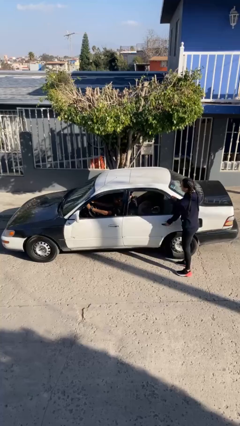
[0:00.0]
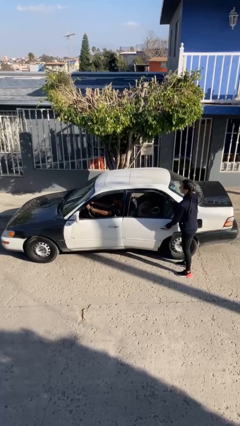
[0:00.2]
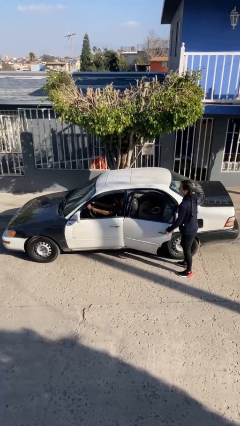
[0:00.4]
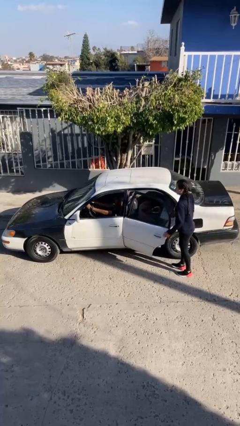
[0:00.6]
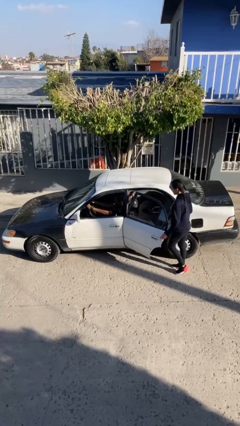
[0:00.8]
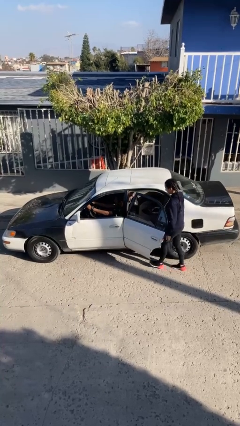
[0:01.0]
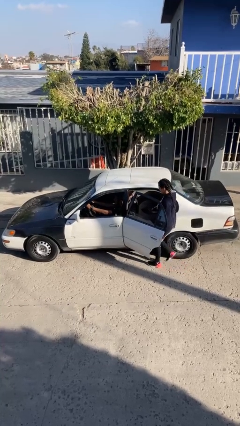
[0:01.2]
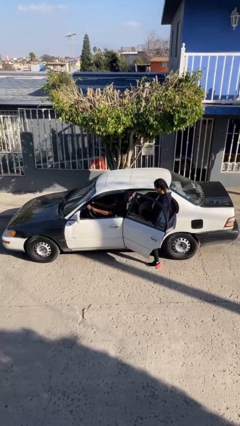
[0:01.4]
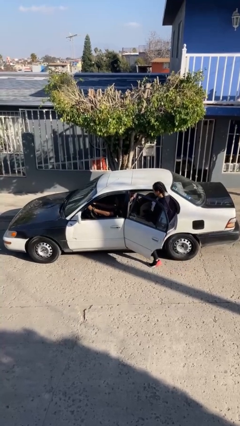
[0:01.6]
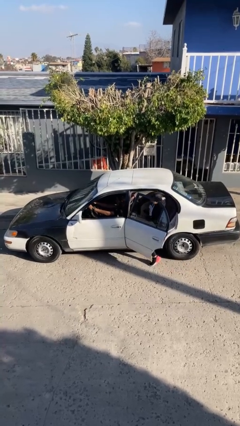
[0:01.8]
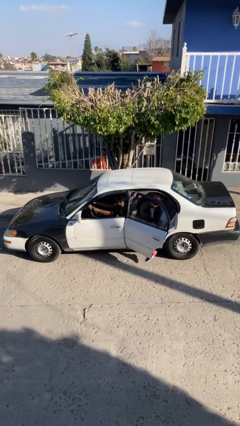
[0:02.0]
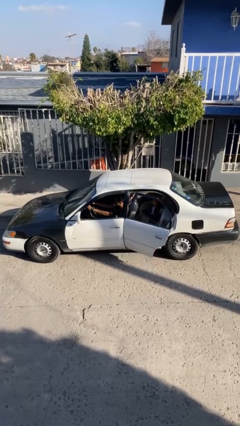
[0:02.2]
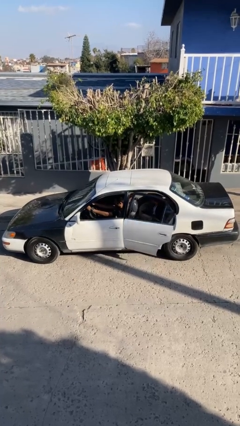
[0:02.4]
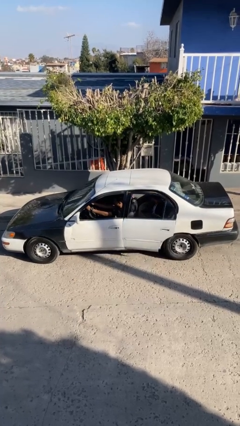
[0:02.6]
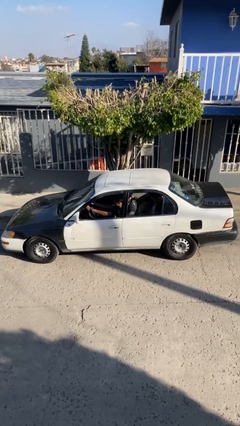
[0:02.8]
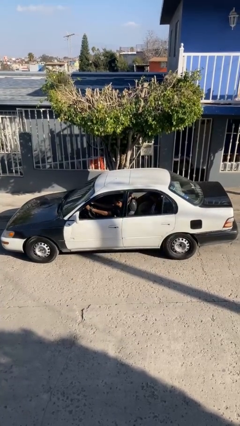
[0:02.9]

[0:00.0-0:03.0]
car picks up person

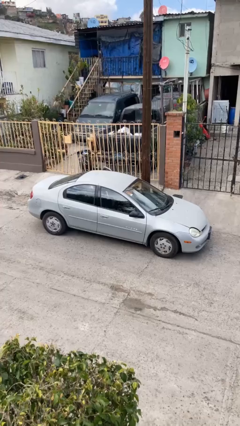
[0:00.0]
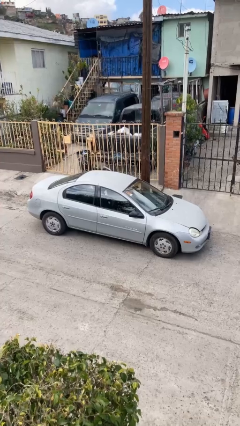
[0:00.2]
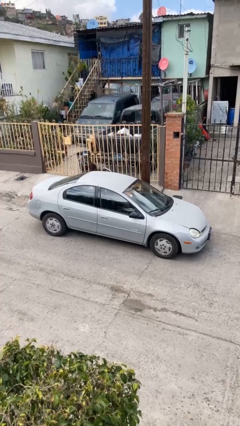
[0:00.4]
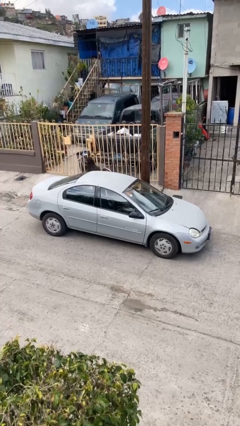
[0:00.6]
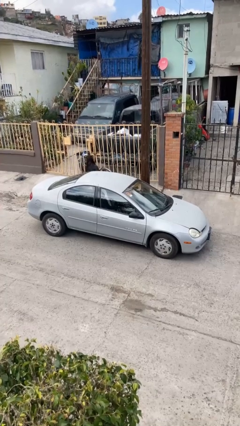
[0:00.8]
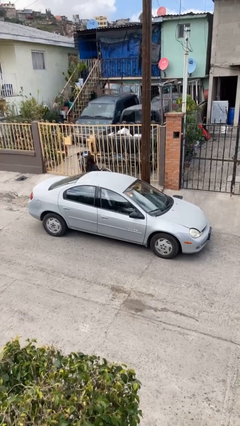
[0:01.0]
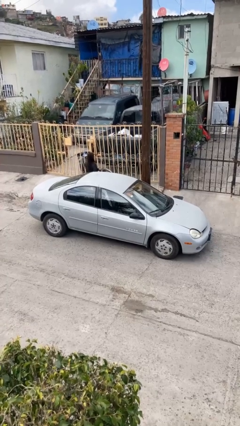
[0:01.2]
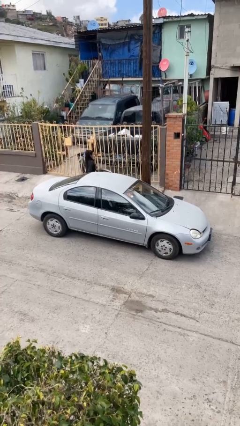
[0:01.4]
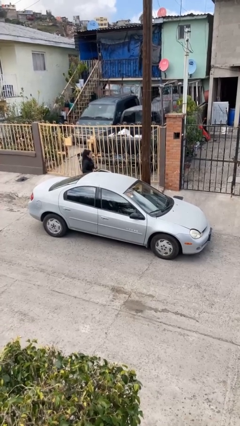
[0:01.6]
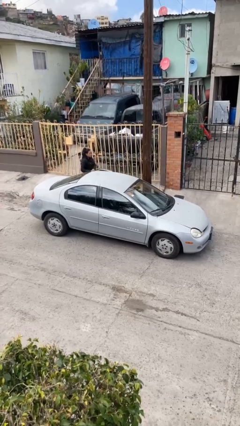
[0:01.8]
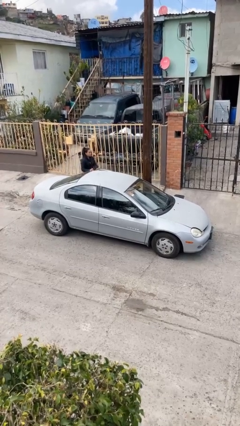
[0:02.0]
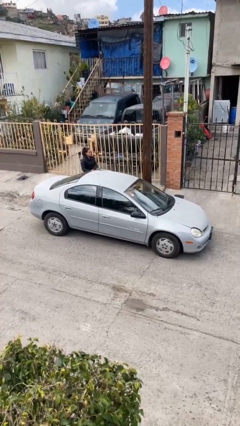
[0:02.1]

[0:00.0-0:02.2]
car drops off person

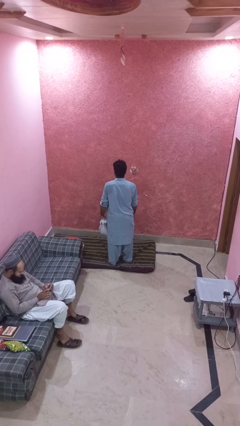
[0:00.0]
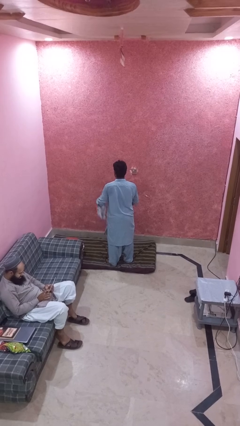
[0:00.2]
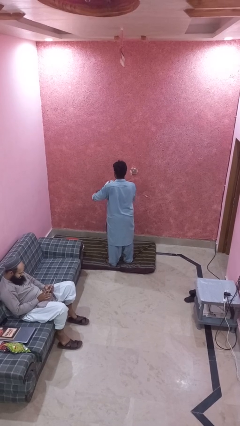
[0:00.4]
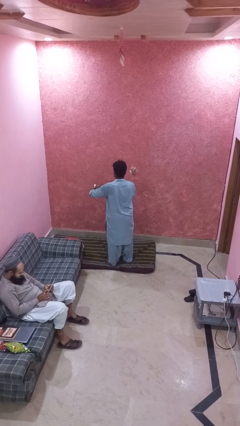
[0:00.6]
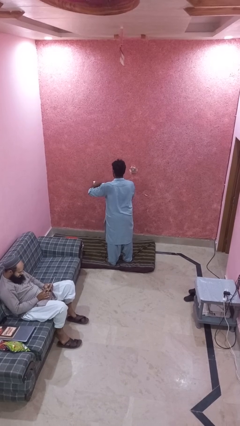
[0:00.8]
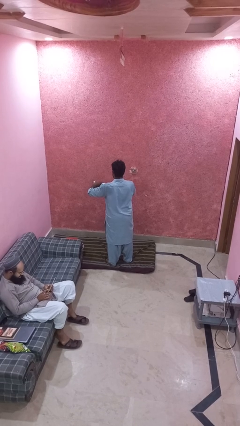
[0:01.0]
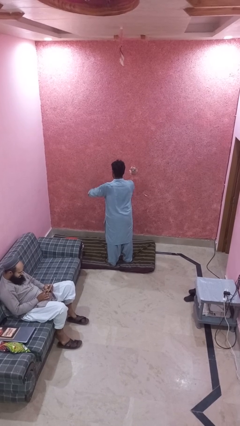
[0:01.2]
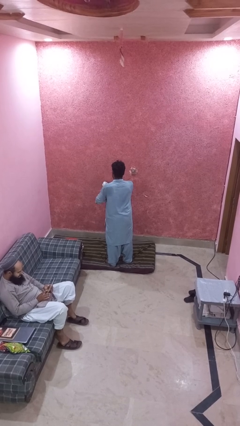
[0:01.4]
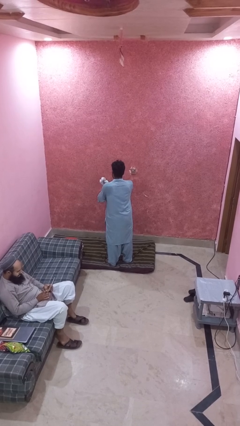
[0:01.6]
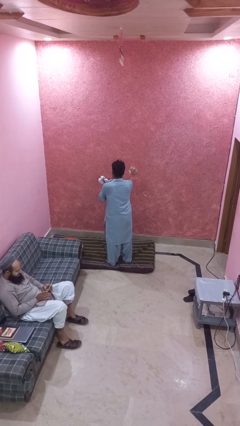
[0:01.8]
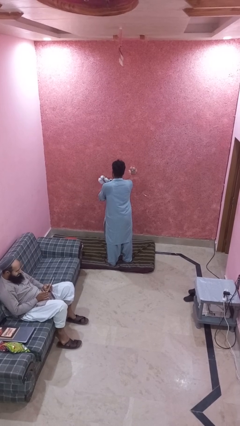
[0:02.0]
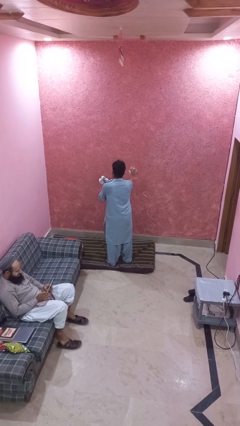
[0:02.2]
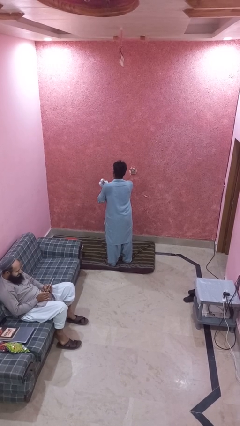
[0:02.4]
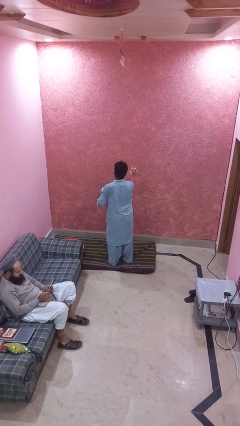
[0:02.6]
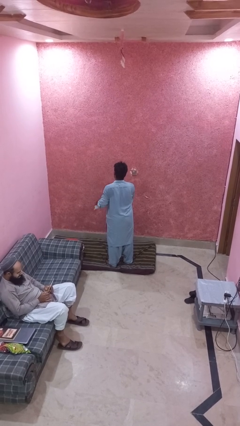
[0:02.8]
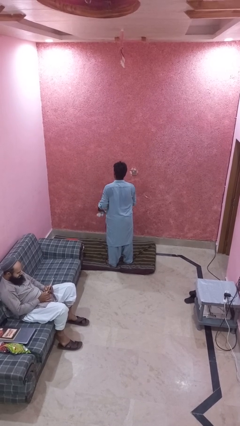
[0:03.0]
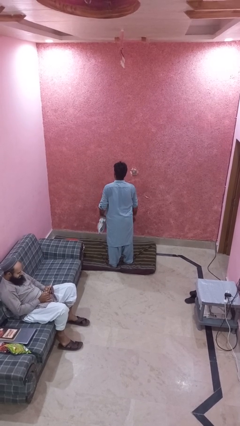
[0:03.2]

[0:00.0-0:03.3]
person squeezes object

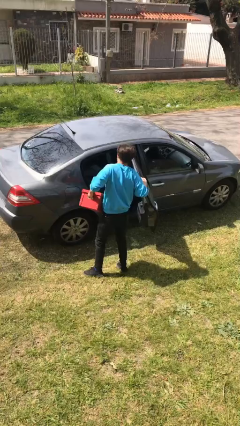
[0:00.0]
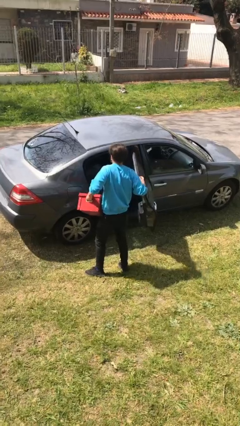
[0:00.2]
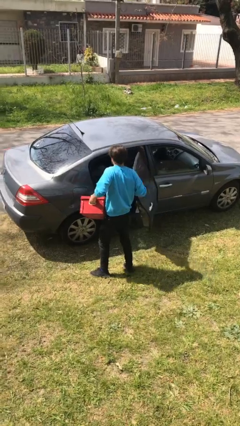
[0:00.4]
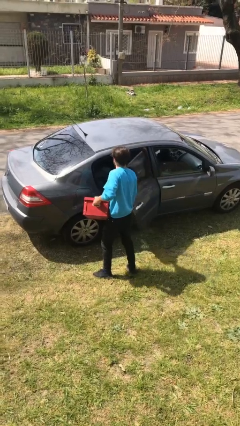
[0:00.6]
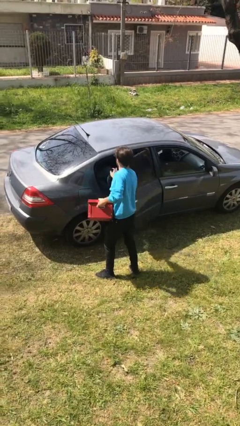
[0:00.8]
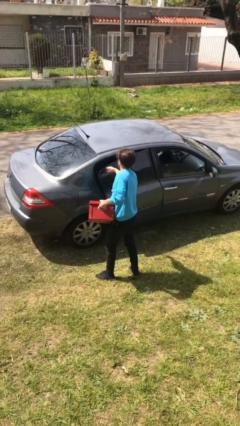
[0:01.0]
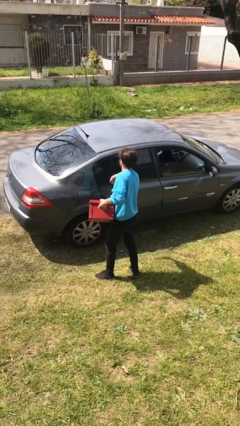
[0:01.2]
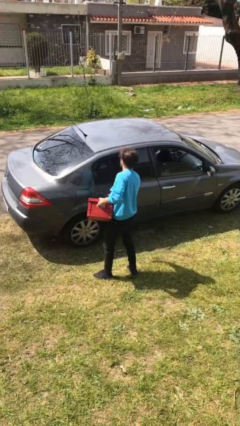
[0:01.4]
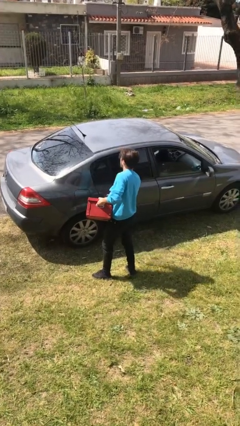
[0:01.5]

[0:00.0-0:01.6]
person closes car door

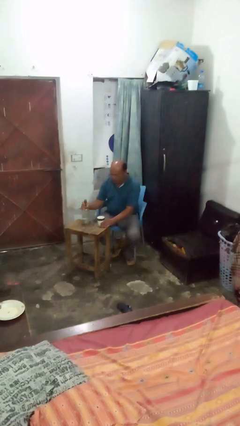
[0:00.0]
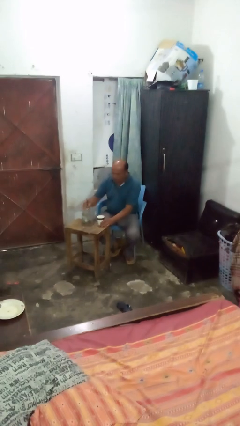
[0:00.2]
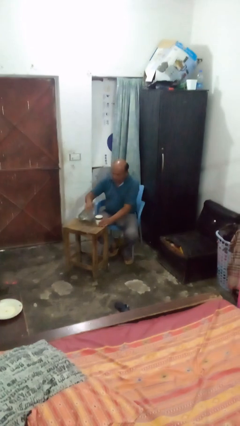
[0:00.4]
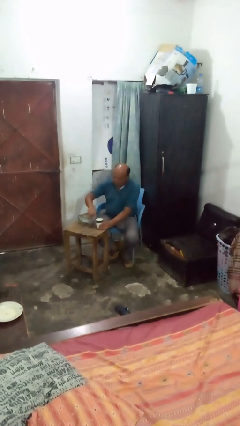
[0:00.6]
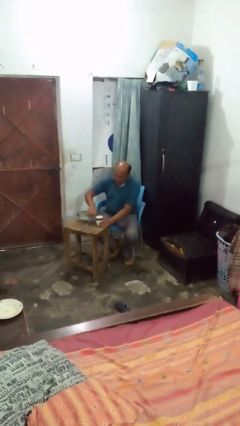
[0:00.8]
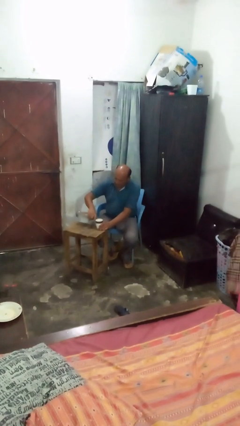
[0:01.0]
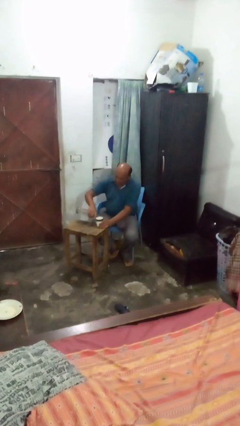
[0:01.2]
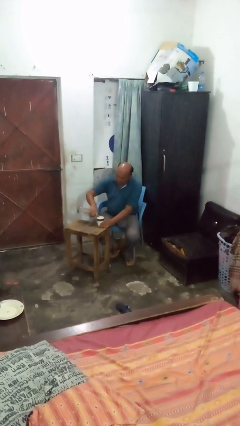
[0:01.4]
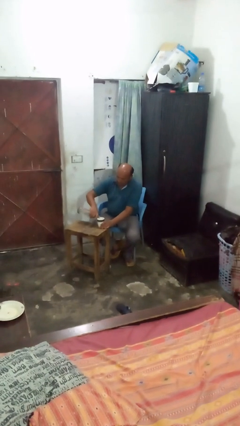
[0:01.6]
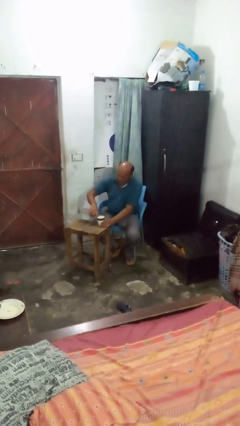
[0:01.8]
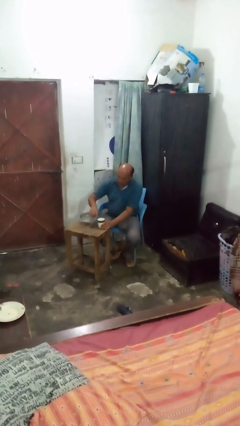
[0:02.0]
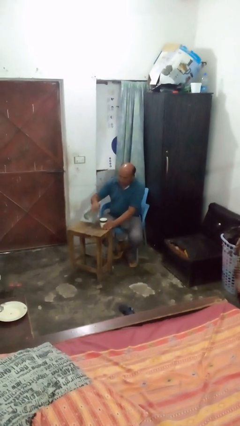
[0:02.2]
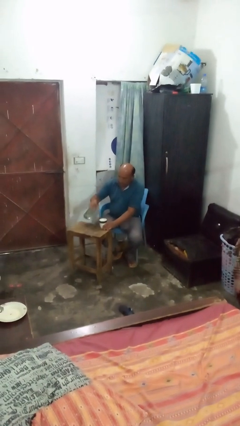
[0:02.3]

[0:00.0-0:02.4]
person pours liquid into cup

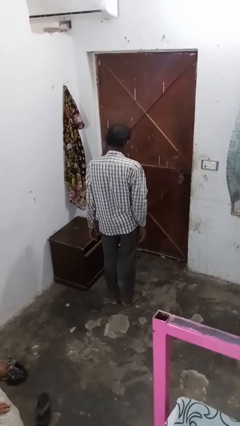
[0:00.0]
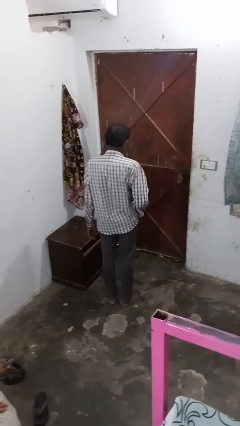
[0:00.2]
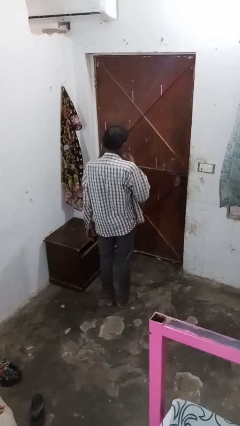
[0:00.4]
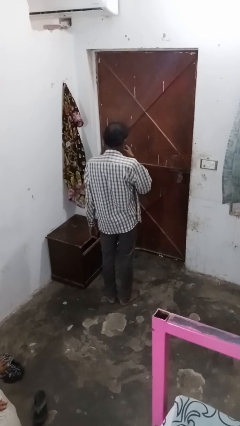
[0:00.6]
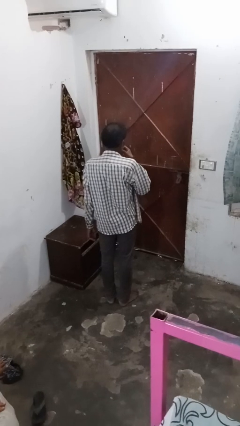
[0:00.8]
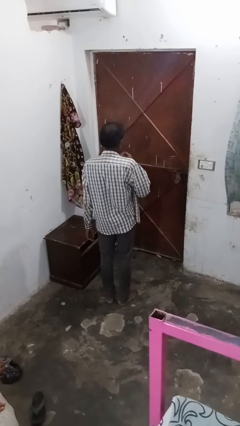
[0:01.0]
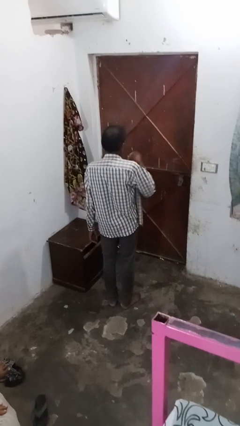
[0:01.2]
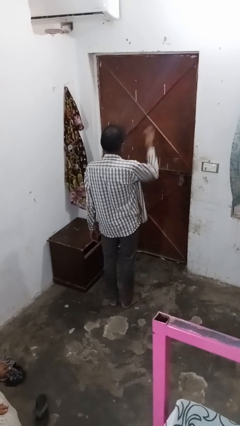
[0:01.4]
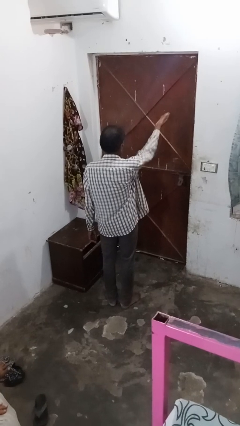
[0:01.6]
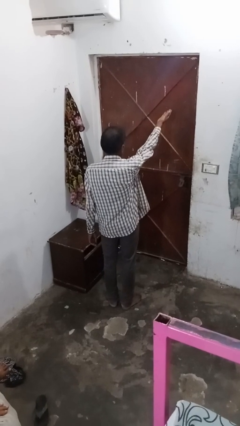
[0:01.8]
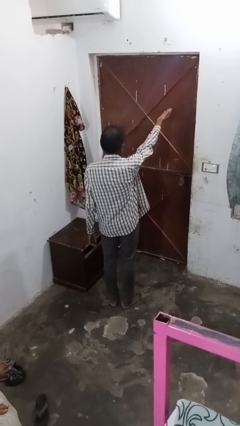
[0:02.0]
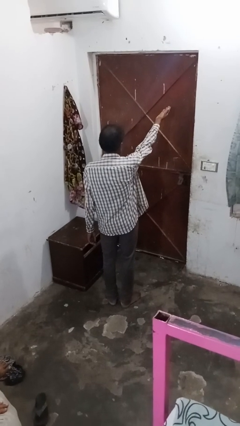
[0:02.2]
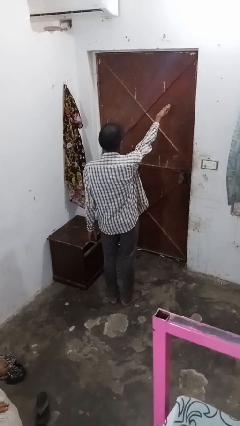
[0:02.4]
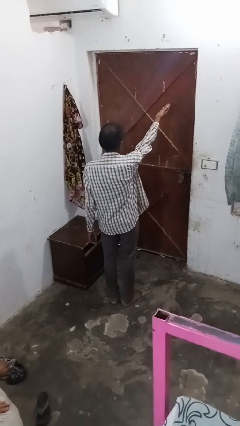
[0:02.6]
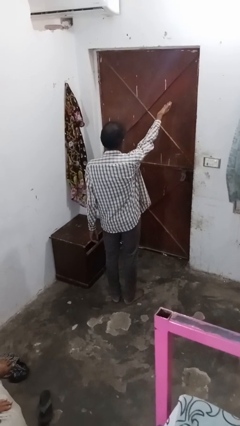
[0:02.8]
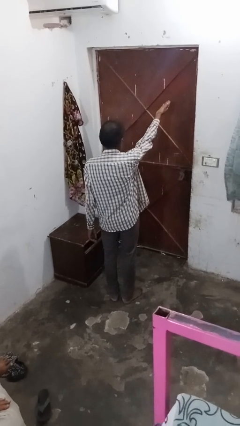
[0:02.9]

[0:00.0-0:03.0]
person gestures blow kiss

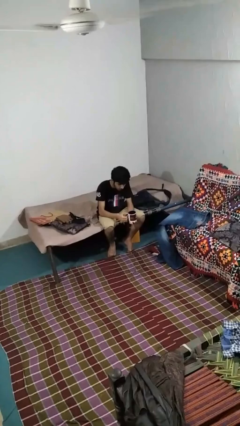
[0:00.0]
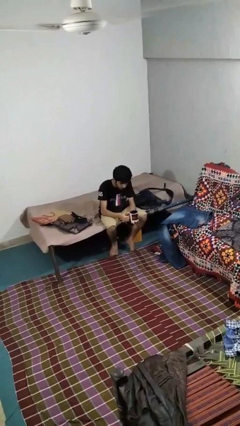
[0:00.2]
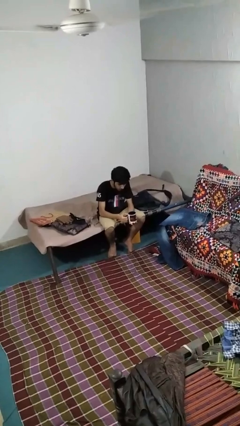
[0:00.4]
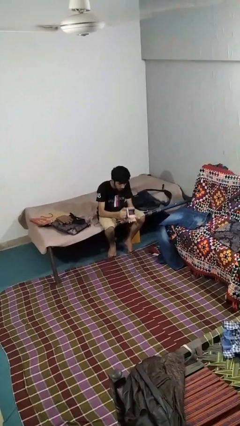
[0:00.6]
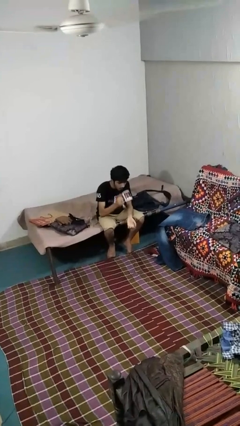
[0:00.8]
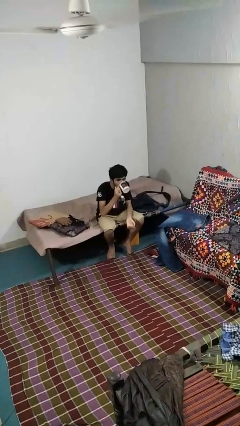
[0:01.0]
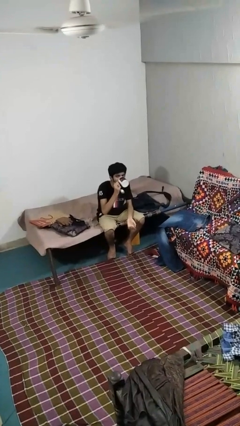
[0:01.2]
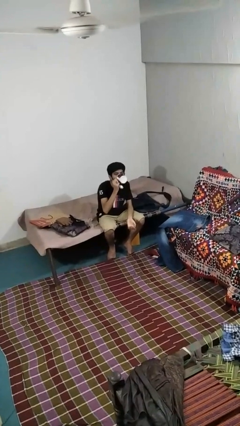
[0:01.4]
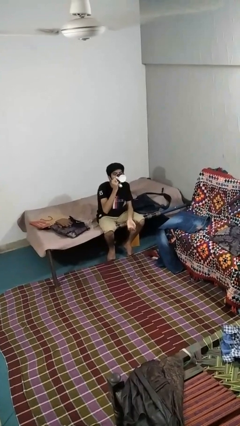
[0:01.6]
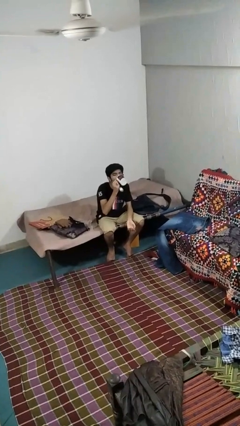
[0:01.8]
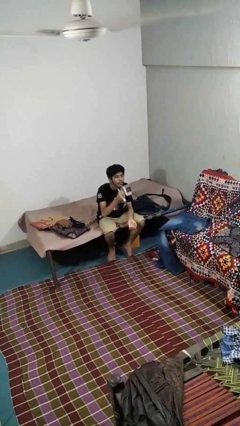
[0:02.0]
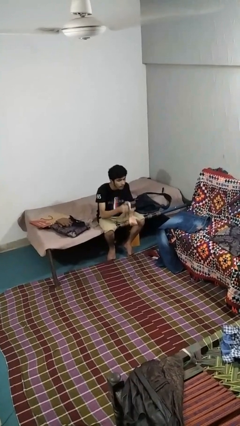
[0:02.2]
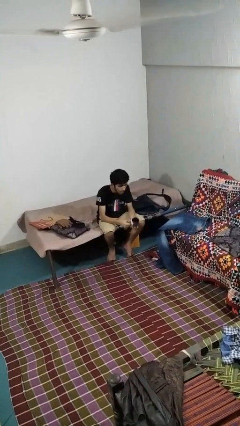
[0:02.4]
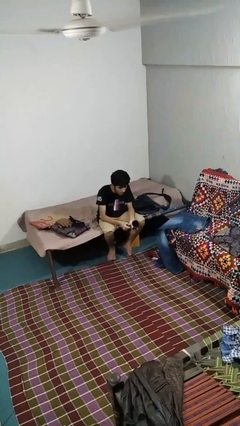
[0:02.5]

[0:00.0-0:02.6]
person drinks from mug
